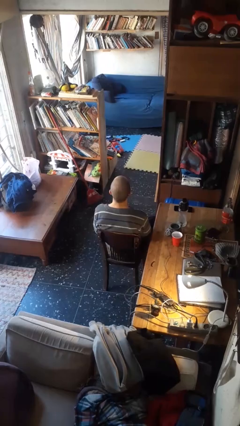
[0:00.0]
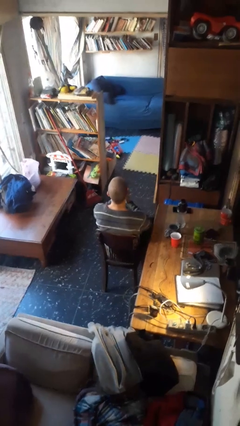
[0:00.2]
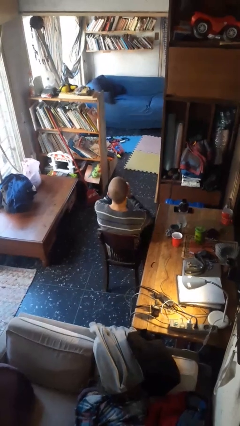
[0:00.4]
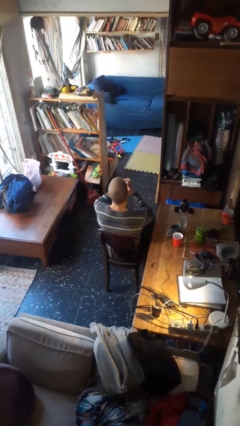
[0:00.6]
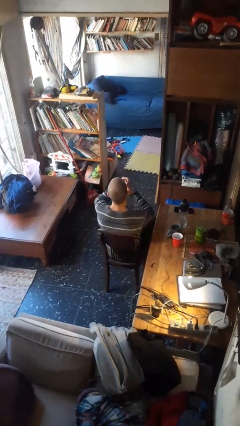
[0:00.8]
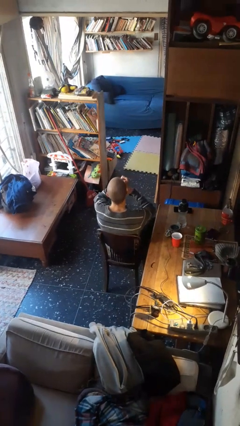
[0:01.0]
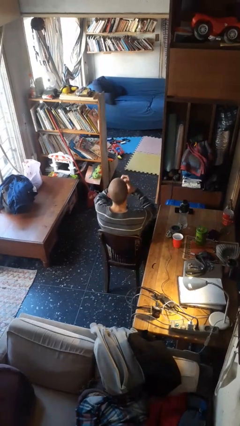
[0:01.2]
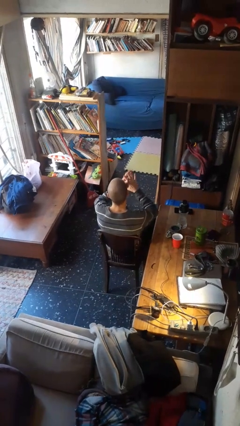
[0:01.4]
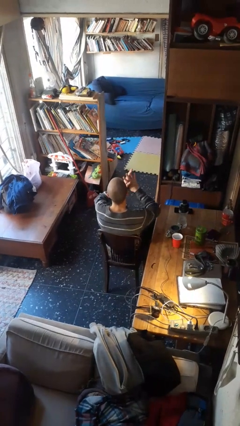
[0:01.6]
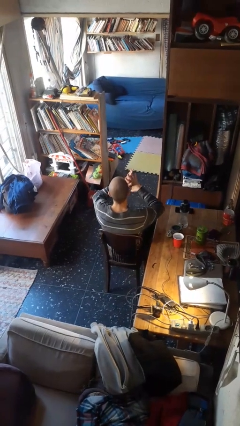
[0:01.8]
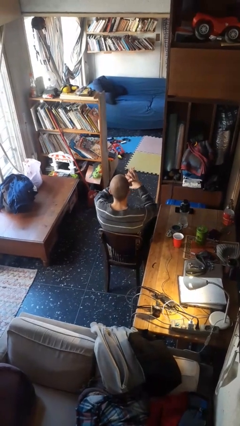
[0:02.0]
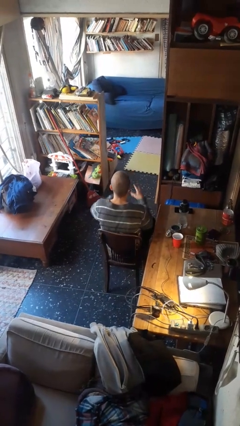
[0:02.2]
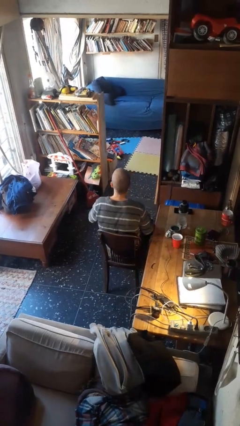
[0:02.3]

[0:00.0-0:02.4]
person snaps fingers

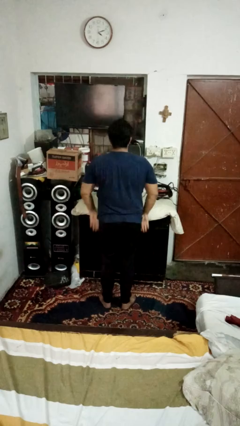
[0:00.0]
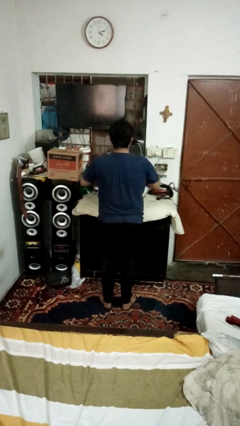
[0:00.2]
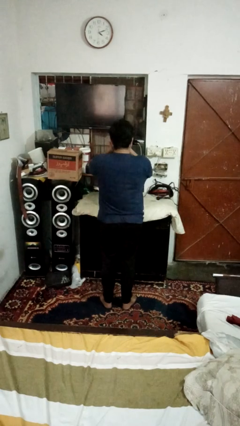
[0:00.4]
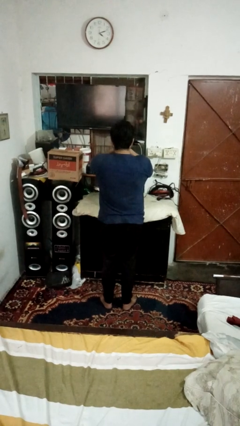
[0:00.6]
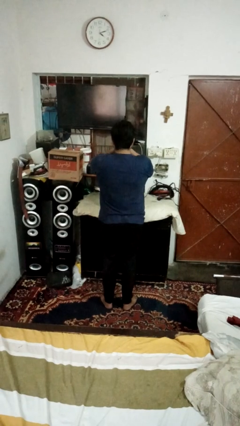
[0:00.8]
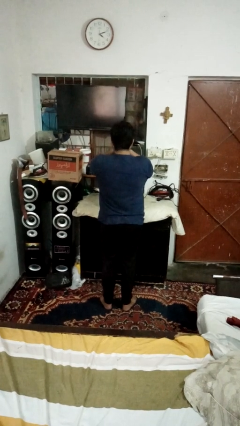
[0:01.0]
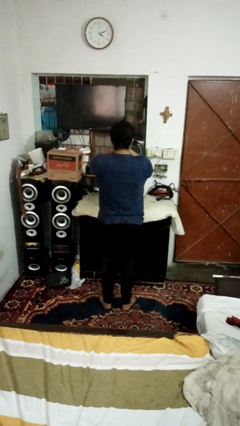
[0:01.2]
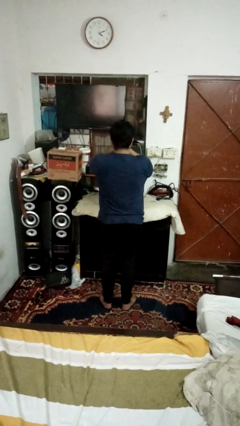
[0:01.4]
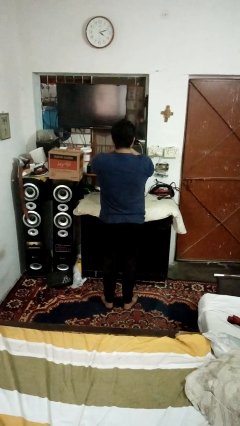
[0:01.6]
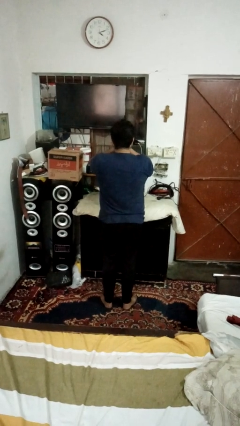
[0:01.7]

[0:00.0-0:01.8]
person covers face with hands

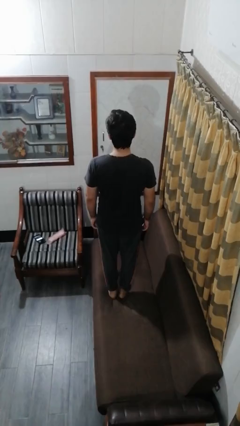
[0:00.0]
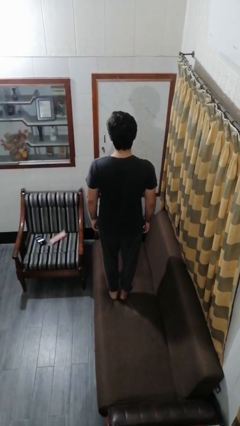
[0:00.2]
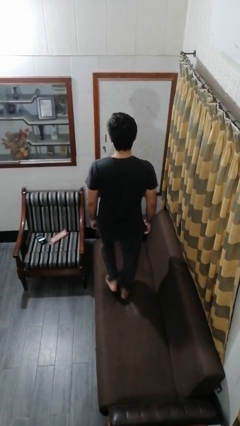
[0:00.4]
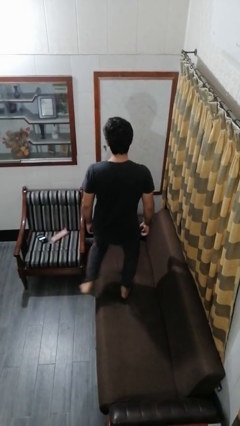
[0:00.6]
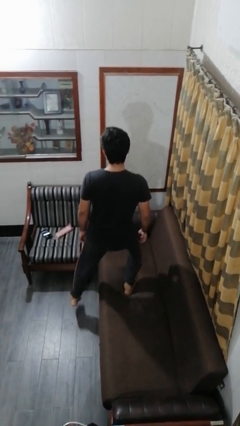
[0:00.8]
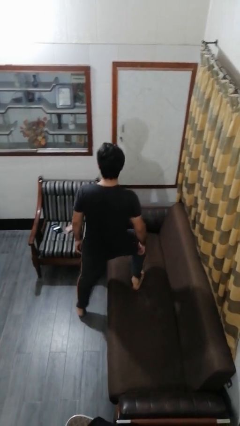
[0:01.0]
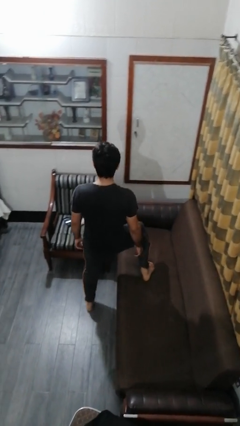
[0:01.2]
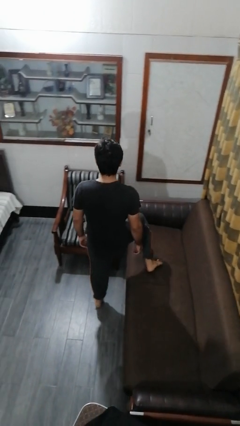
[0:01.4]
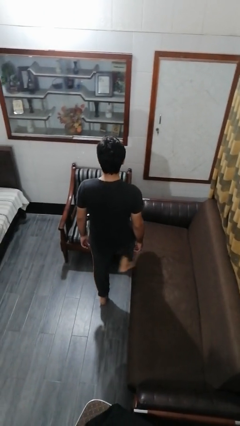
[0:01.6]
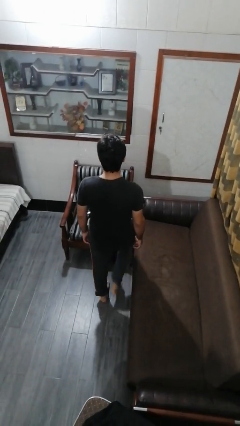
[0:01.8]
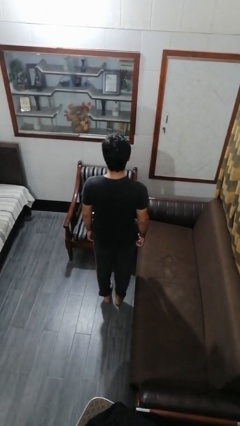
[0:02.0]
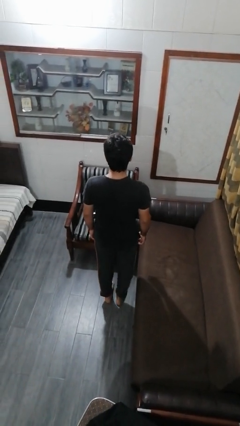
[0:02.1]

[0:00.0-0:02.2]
person climbs off couch

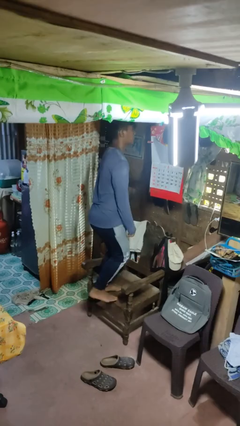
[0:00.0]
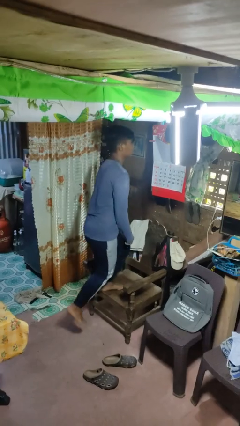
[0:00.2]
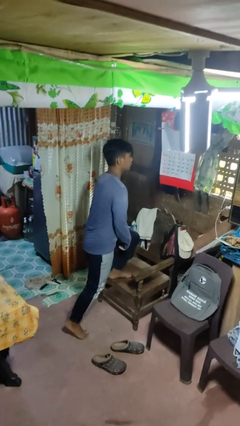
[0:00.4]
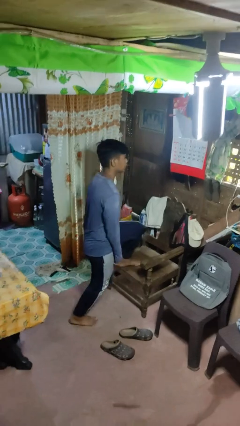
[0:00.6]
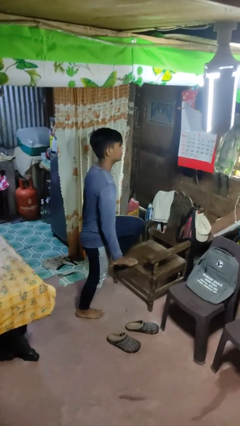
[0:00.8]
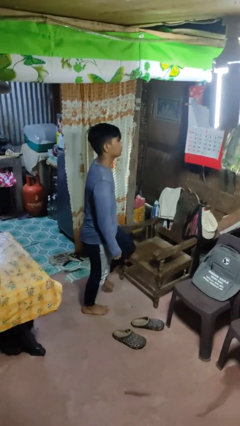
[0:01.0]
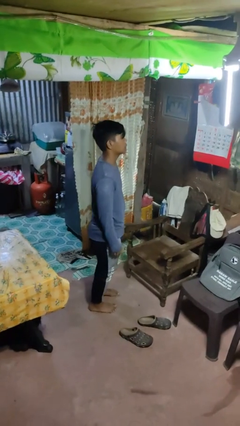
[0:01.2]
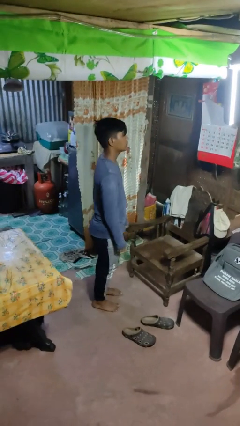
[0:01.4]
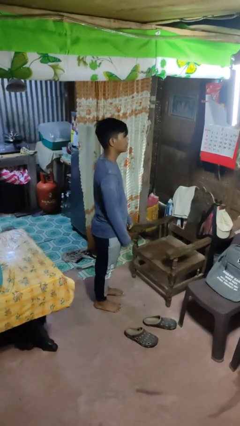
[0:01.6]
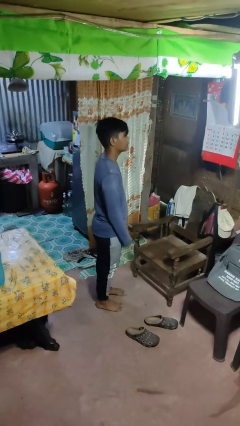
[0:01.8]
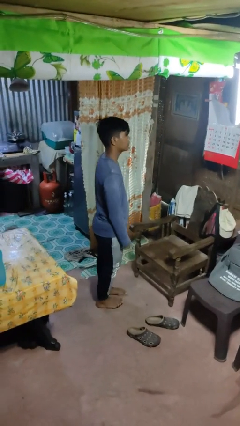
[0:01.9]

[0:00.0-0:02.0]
person climbs off chair

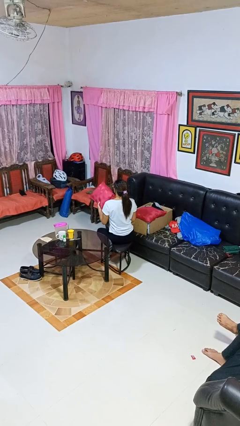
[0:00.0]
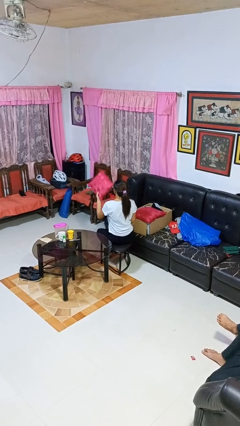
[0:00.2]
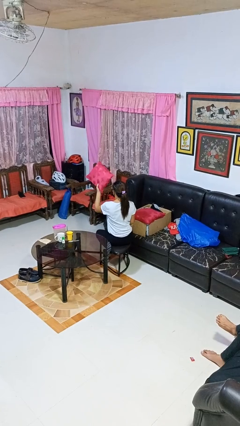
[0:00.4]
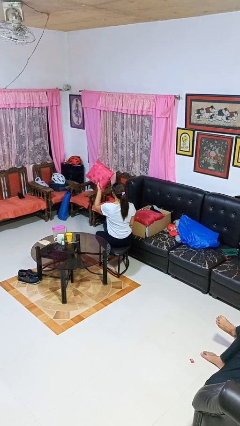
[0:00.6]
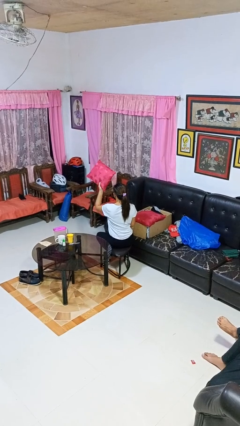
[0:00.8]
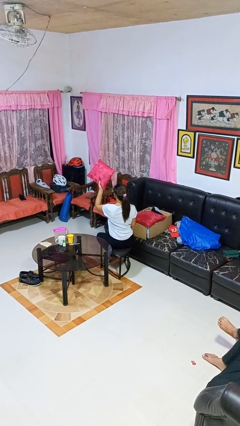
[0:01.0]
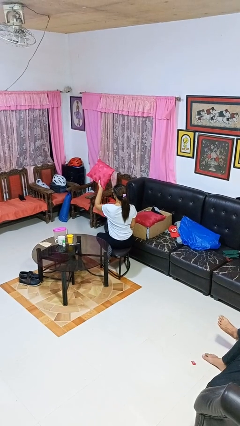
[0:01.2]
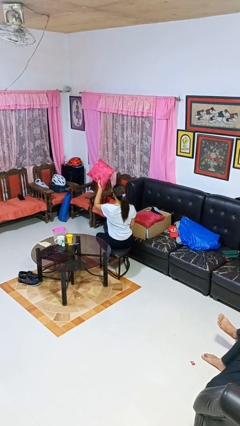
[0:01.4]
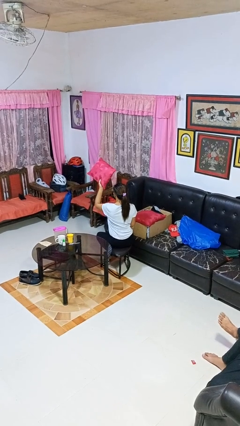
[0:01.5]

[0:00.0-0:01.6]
person holds object above head

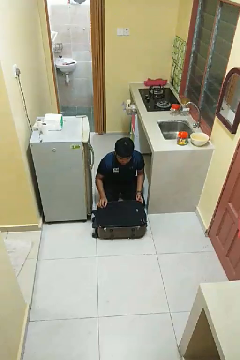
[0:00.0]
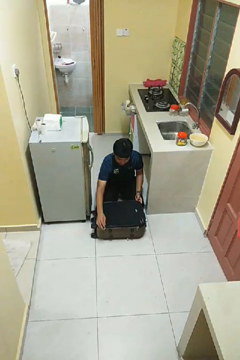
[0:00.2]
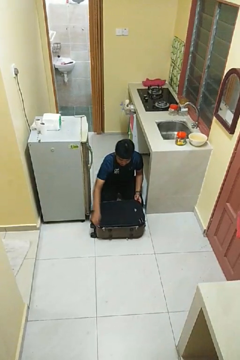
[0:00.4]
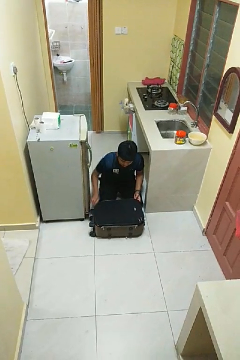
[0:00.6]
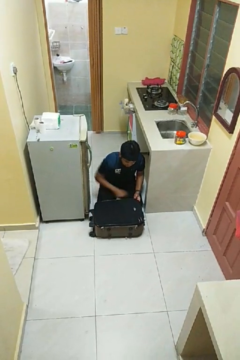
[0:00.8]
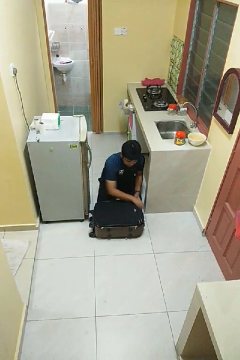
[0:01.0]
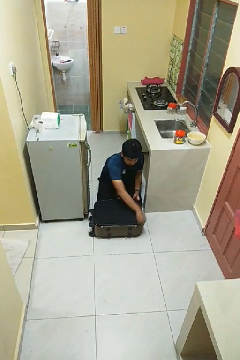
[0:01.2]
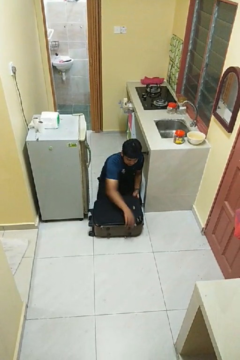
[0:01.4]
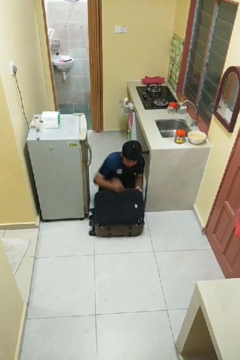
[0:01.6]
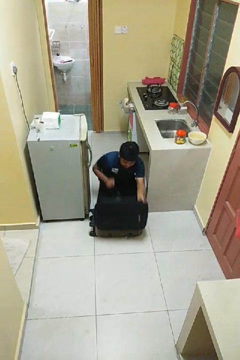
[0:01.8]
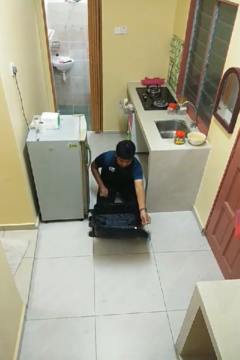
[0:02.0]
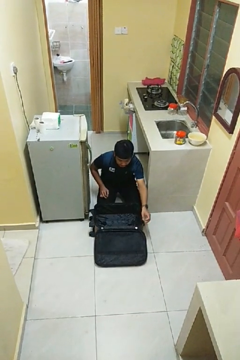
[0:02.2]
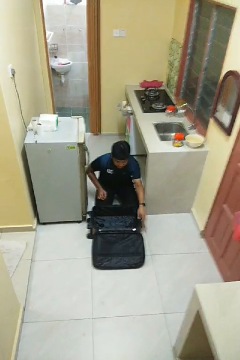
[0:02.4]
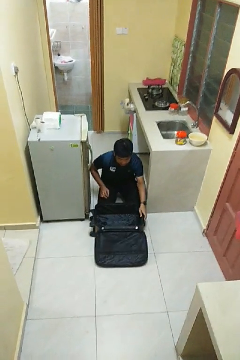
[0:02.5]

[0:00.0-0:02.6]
person opens suitcase

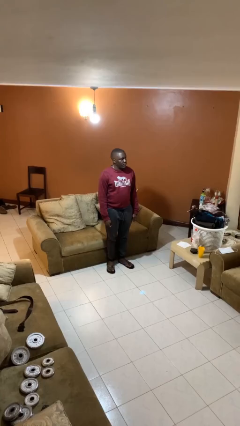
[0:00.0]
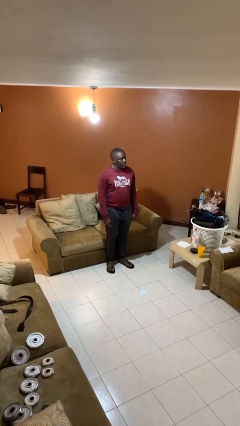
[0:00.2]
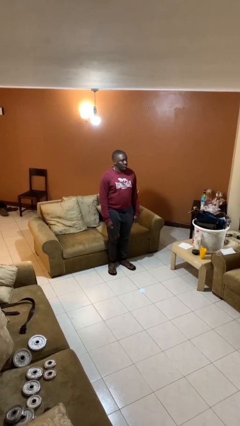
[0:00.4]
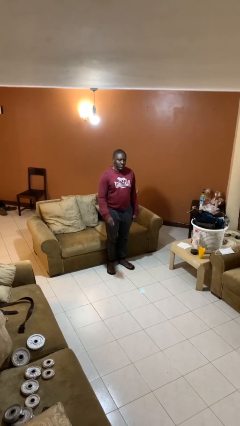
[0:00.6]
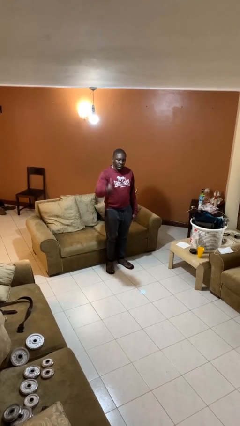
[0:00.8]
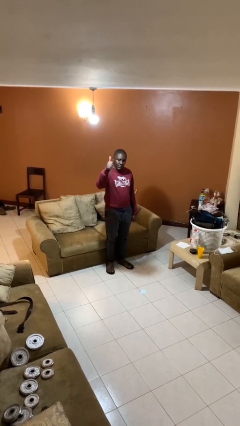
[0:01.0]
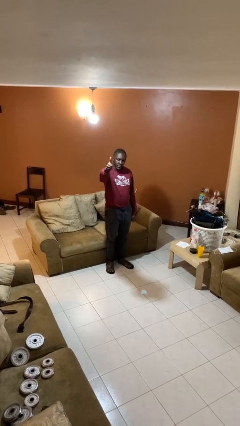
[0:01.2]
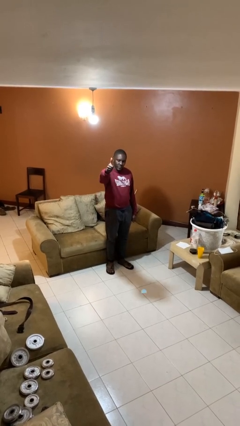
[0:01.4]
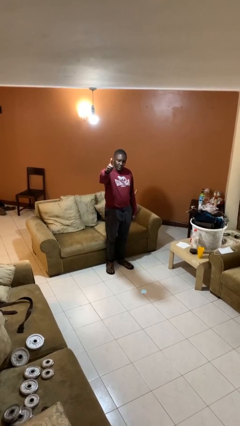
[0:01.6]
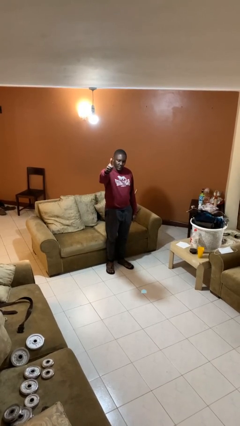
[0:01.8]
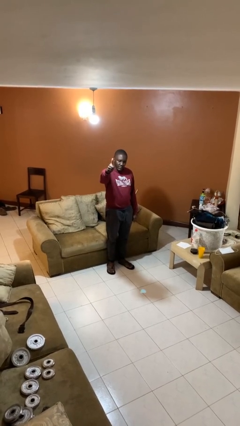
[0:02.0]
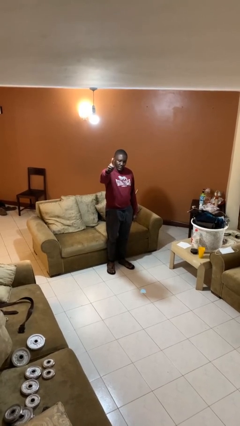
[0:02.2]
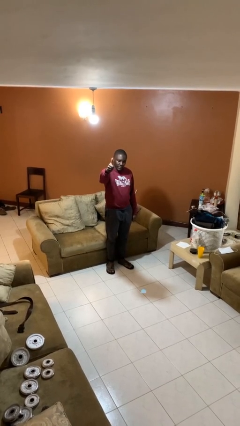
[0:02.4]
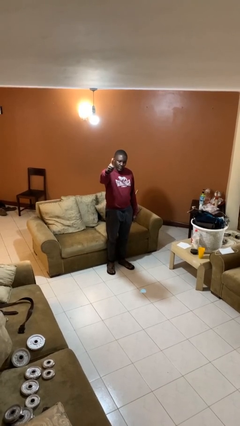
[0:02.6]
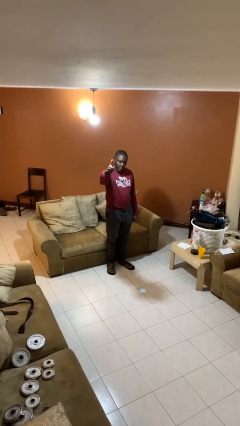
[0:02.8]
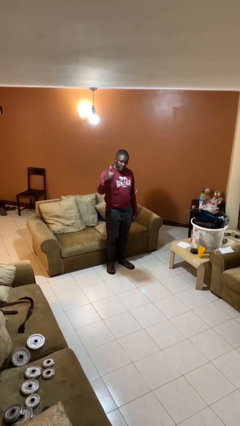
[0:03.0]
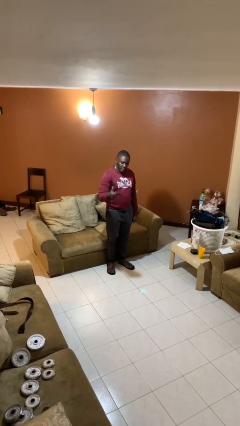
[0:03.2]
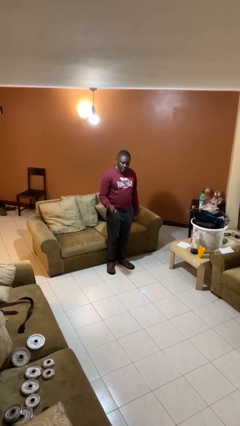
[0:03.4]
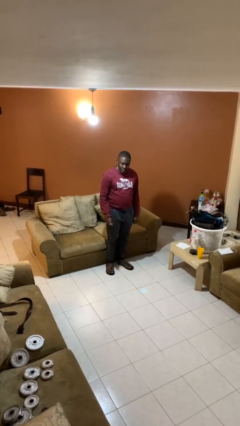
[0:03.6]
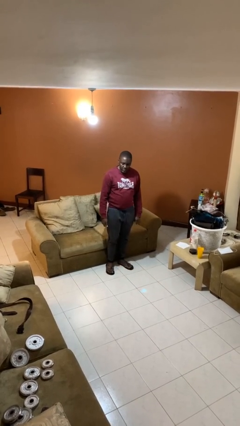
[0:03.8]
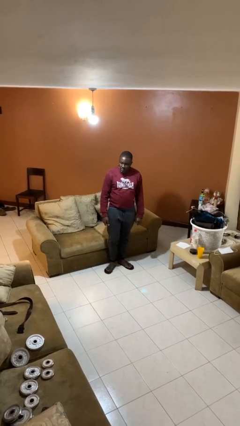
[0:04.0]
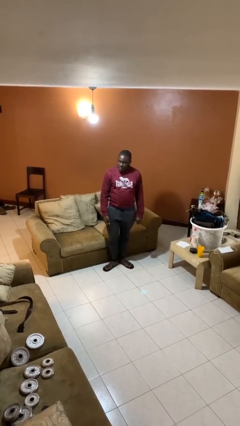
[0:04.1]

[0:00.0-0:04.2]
person gestures thumbs up

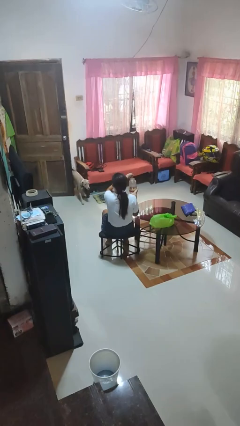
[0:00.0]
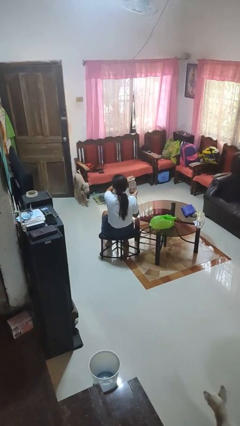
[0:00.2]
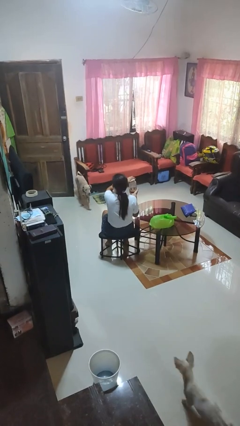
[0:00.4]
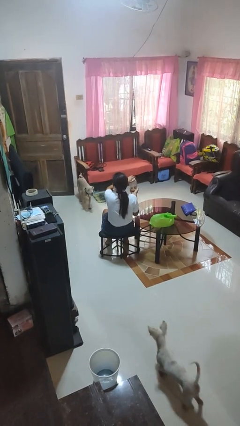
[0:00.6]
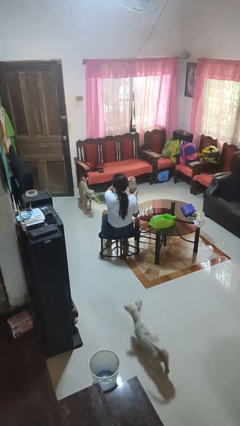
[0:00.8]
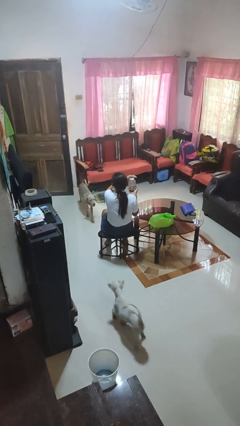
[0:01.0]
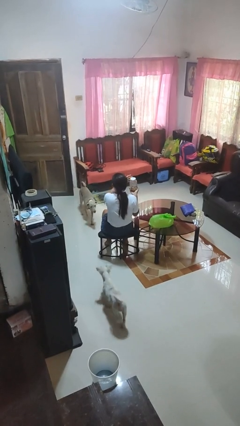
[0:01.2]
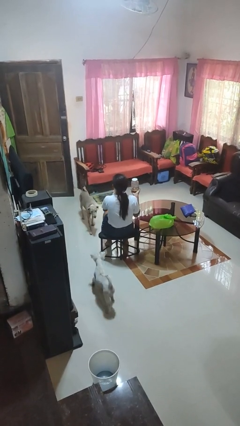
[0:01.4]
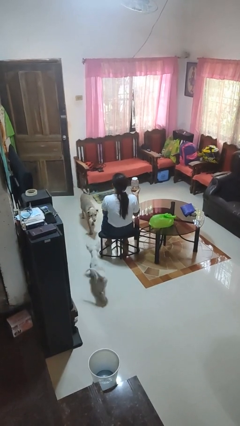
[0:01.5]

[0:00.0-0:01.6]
person closes jar
